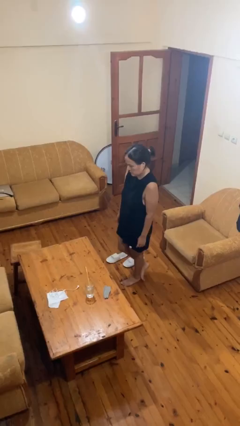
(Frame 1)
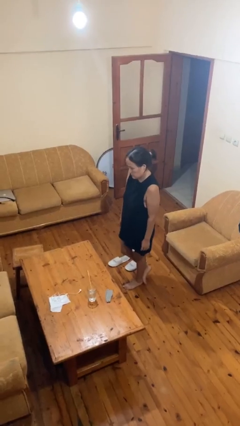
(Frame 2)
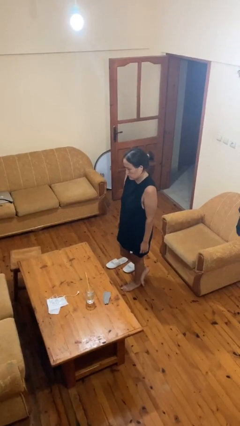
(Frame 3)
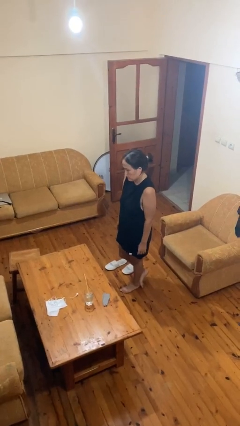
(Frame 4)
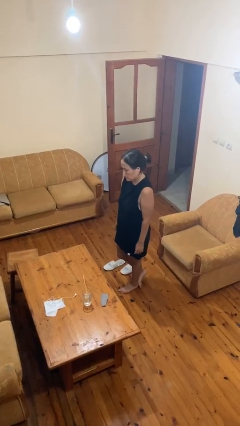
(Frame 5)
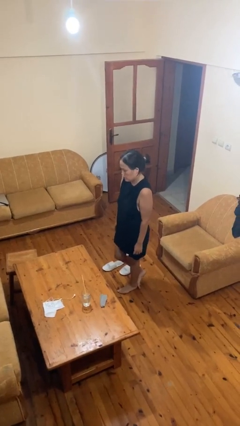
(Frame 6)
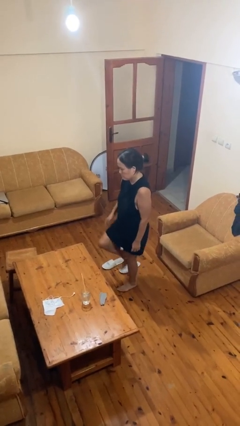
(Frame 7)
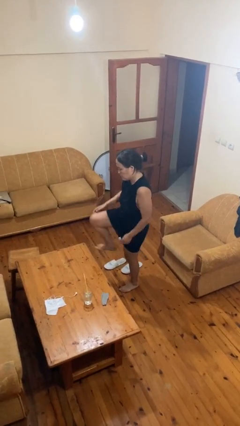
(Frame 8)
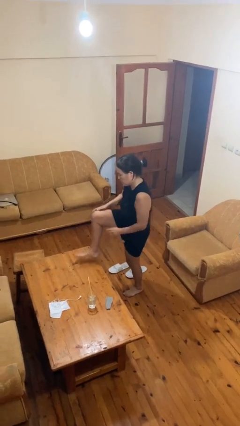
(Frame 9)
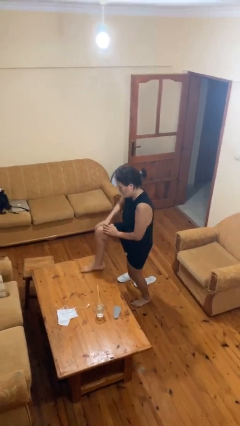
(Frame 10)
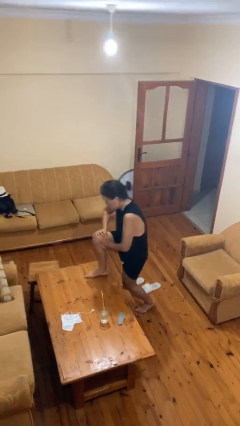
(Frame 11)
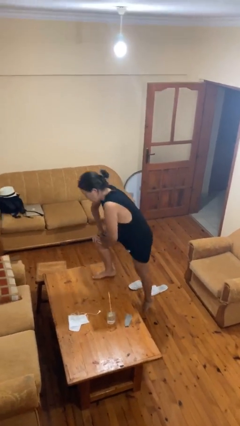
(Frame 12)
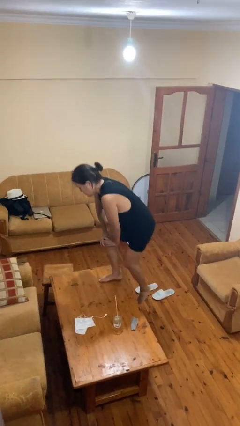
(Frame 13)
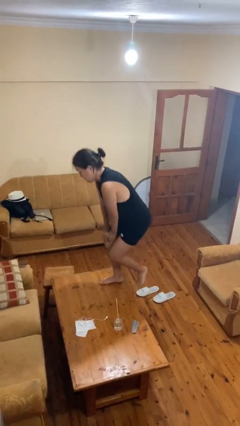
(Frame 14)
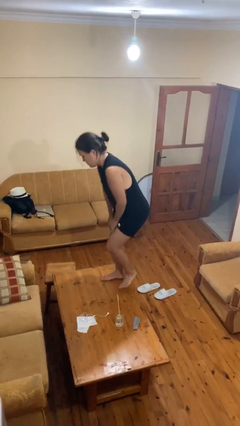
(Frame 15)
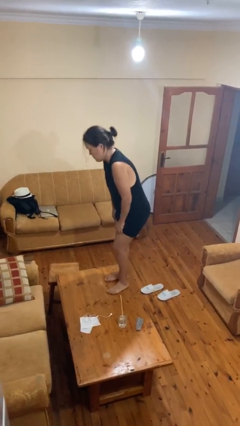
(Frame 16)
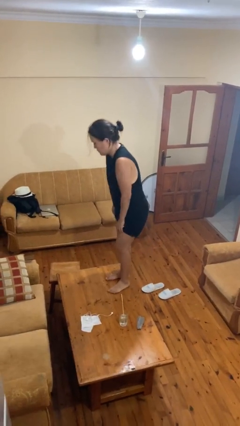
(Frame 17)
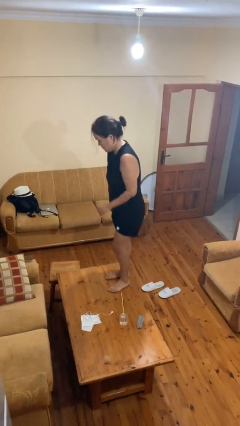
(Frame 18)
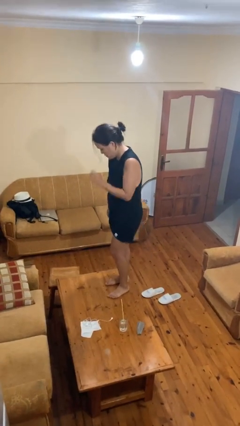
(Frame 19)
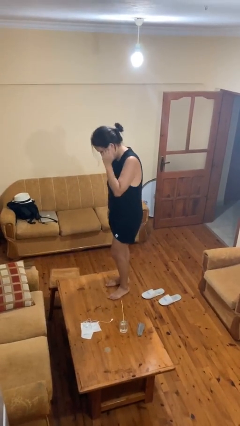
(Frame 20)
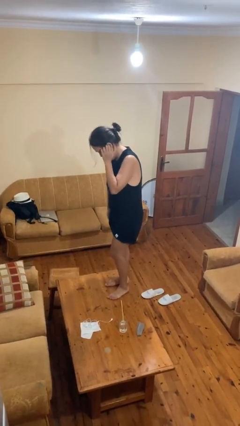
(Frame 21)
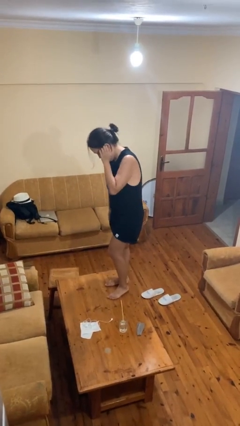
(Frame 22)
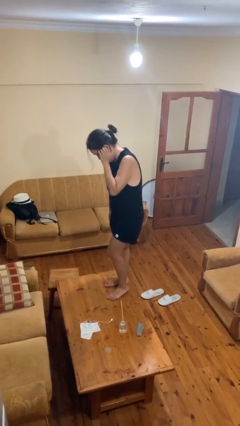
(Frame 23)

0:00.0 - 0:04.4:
person climbs on table

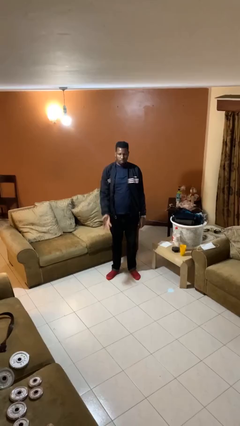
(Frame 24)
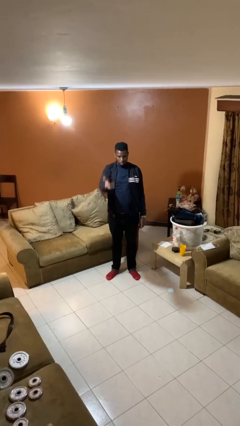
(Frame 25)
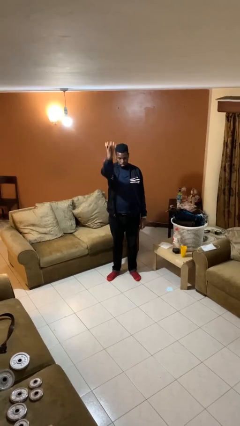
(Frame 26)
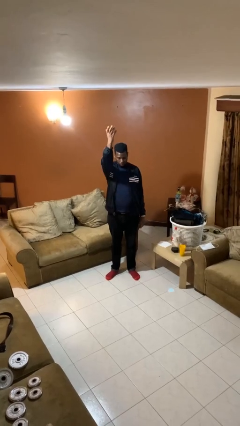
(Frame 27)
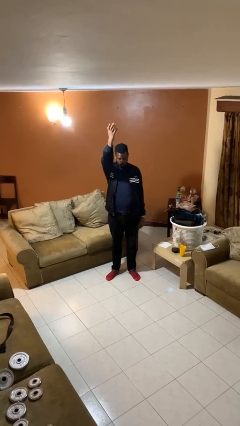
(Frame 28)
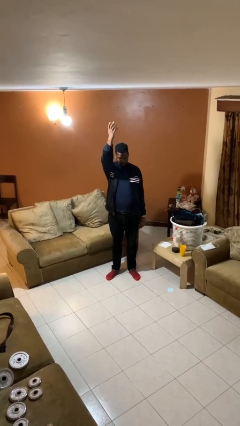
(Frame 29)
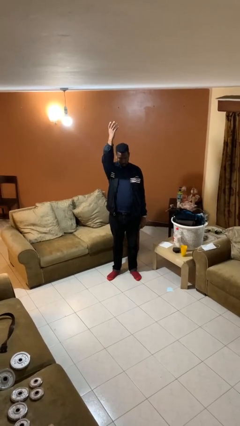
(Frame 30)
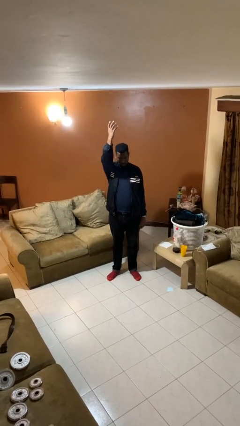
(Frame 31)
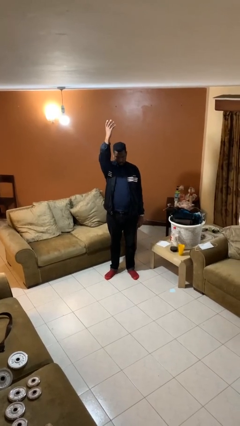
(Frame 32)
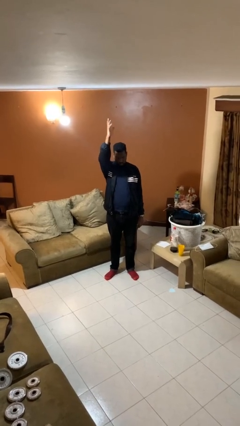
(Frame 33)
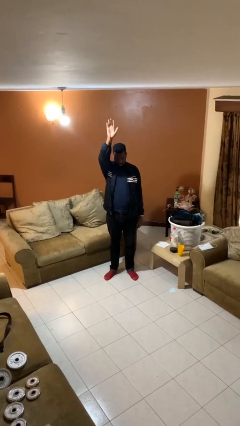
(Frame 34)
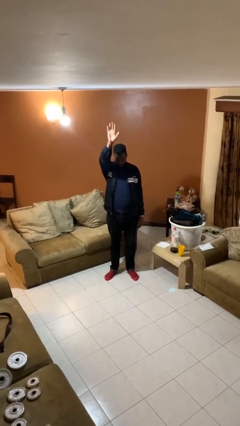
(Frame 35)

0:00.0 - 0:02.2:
person gestures swipe up

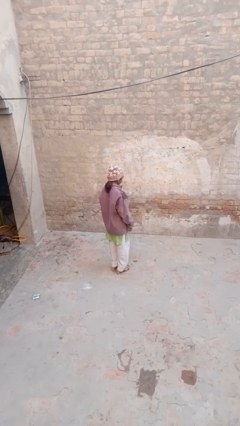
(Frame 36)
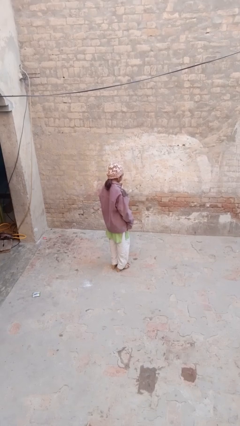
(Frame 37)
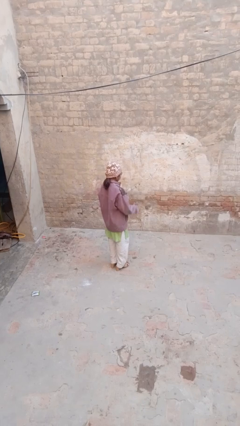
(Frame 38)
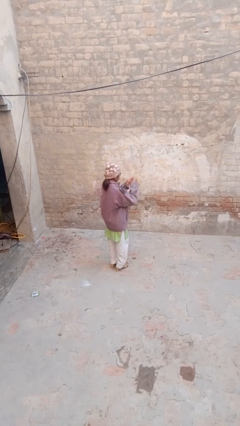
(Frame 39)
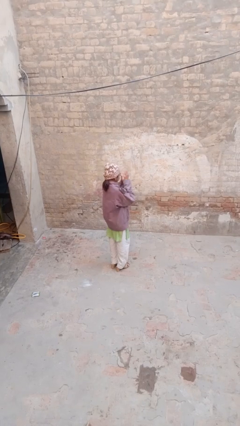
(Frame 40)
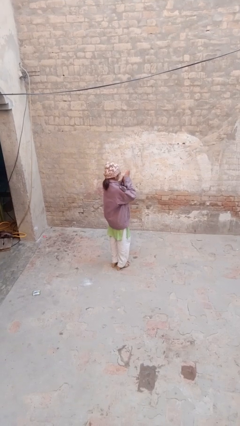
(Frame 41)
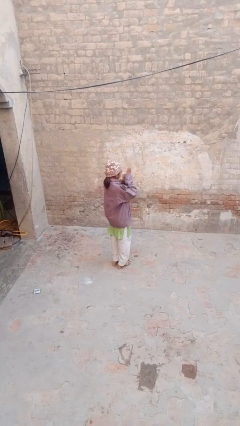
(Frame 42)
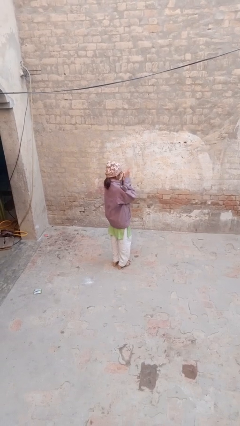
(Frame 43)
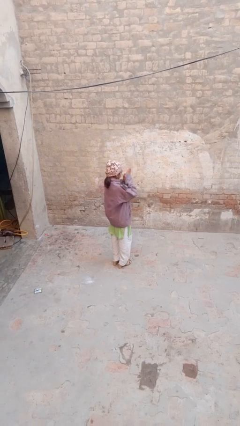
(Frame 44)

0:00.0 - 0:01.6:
person blows into hands

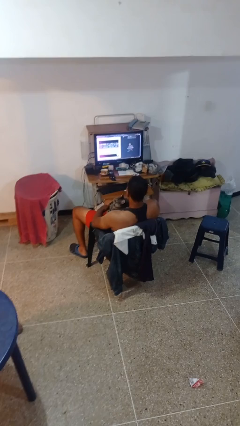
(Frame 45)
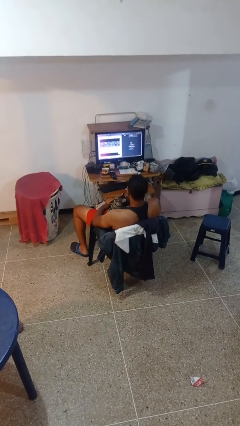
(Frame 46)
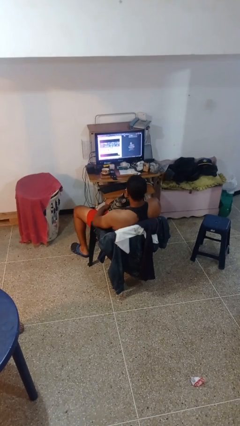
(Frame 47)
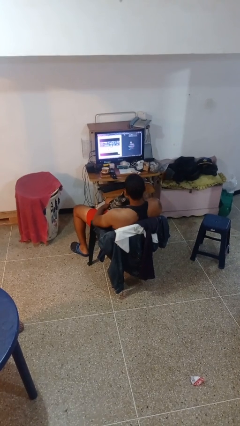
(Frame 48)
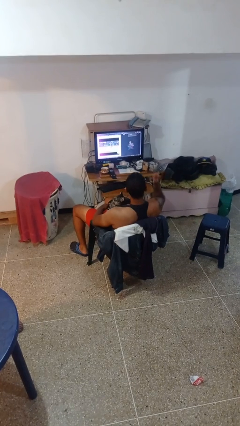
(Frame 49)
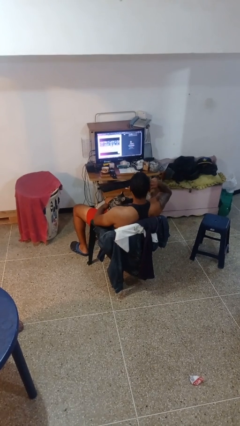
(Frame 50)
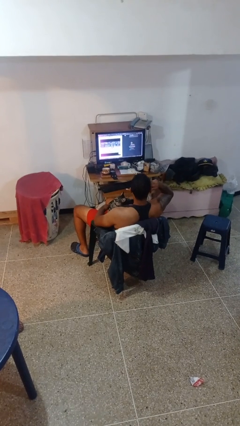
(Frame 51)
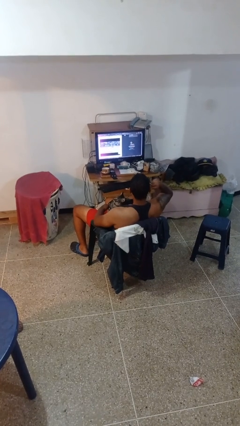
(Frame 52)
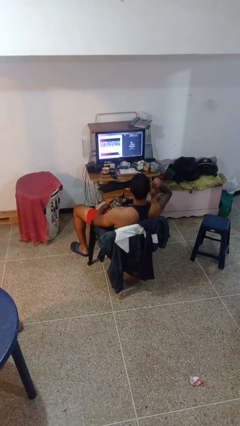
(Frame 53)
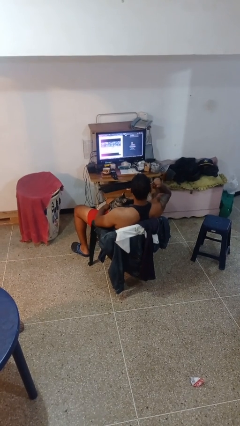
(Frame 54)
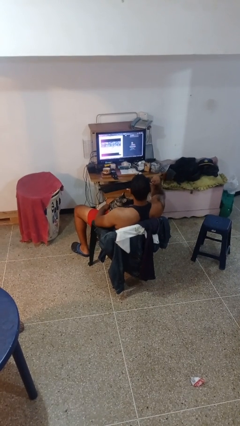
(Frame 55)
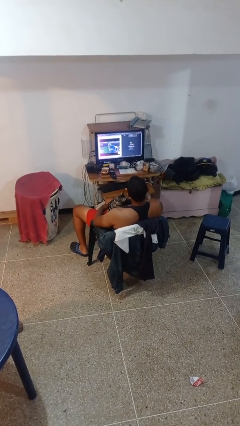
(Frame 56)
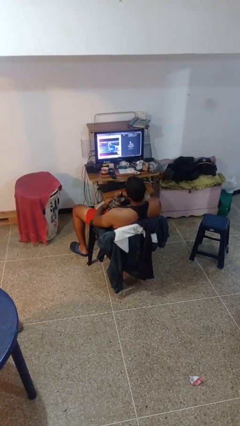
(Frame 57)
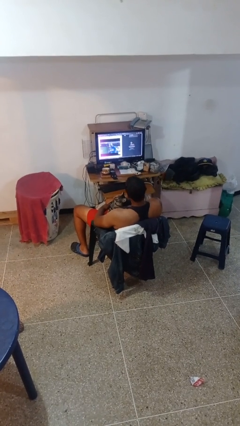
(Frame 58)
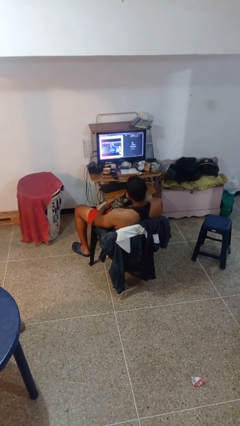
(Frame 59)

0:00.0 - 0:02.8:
person gestures listen closely

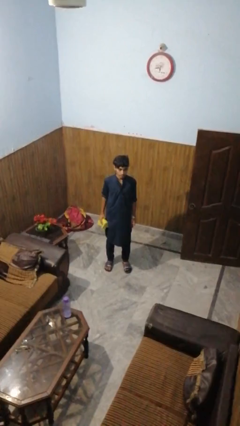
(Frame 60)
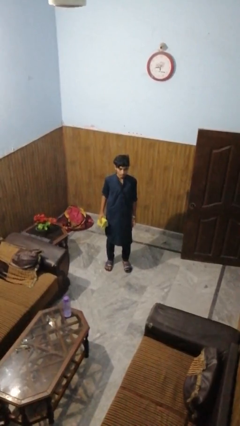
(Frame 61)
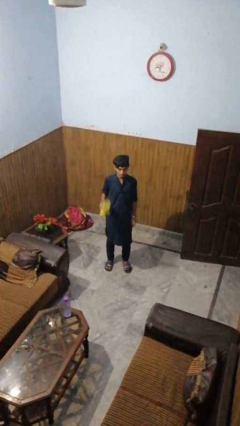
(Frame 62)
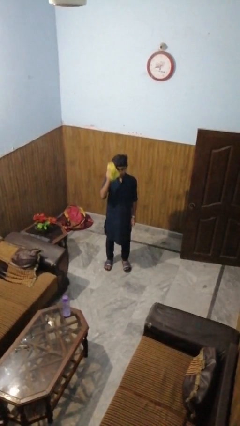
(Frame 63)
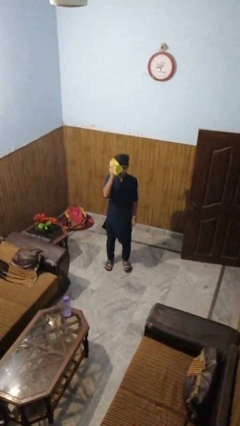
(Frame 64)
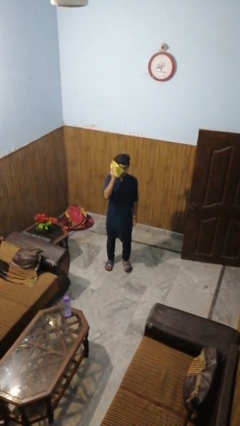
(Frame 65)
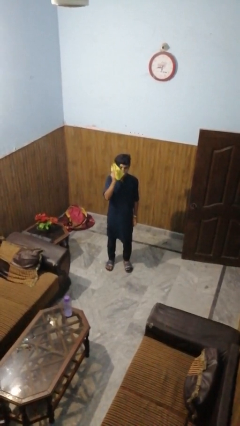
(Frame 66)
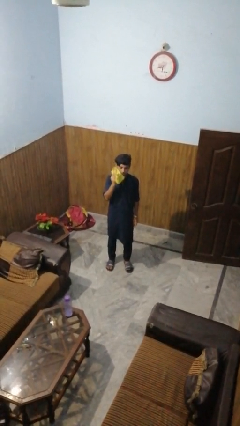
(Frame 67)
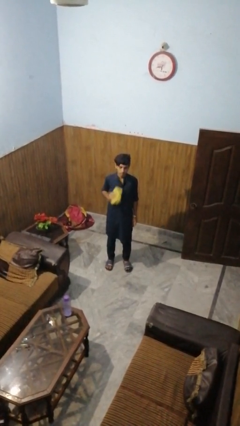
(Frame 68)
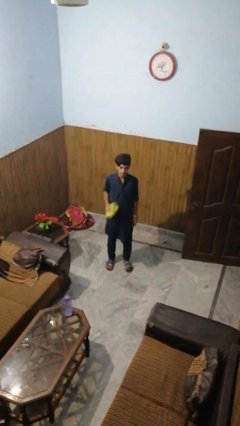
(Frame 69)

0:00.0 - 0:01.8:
person wipes mouth with napkin

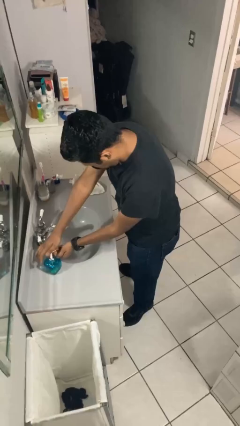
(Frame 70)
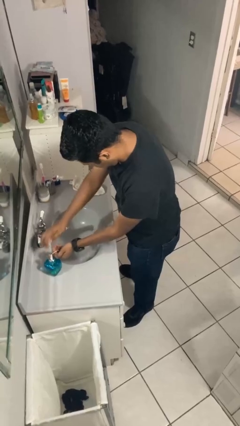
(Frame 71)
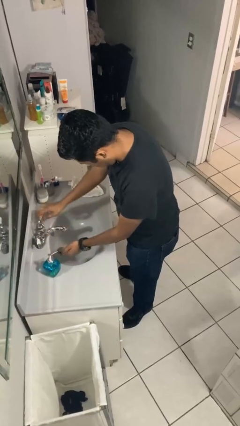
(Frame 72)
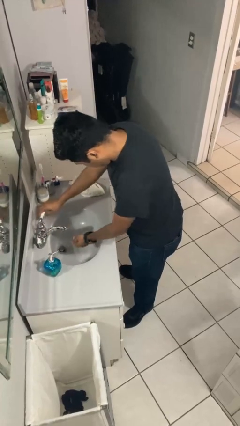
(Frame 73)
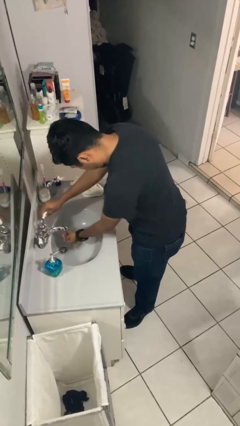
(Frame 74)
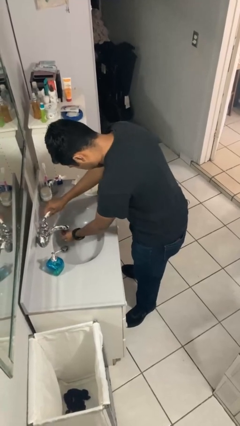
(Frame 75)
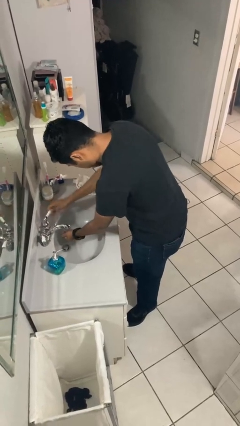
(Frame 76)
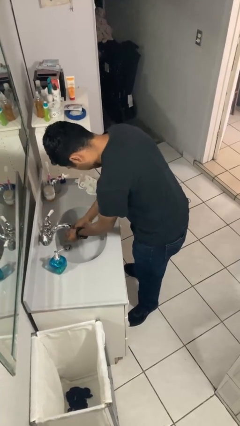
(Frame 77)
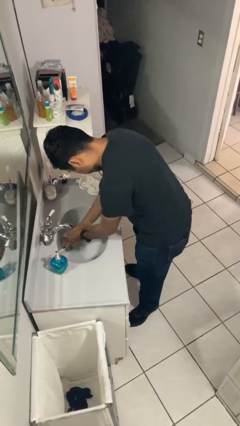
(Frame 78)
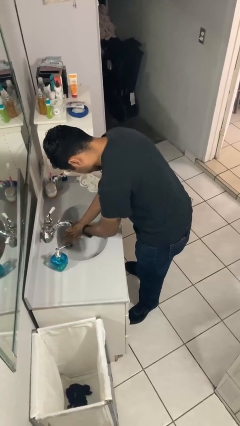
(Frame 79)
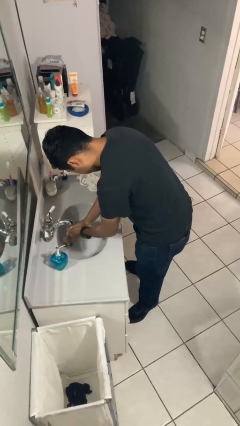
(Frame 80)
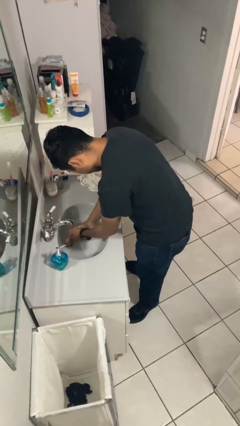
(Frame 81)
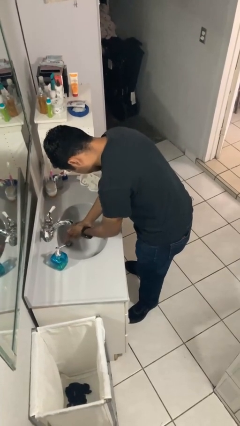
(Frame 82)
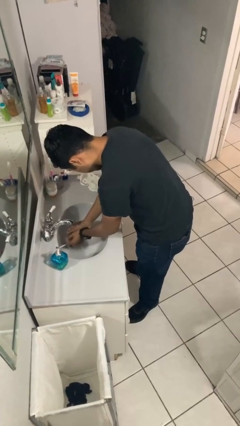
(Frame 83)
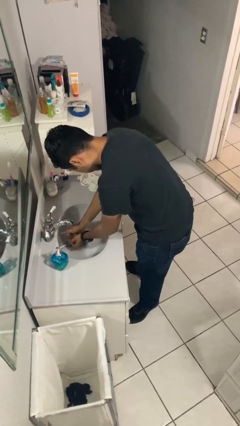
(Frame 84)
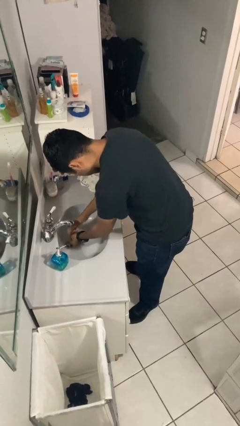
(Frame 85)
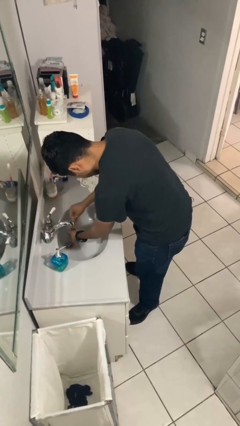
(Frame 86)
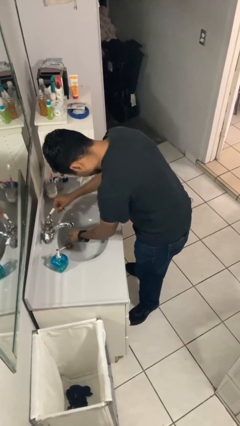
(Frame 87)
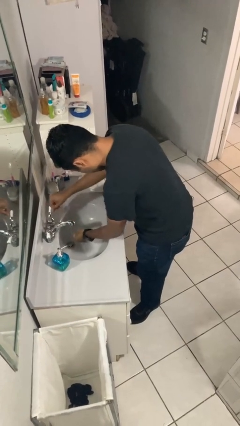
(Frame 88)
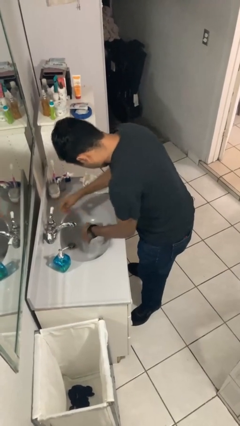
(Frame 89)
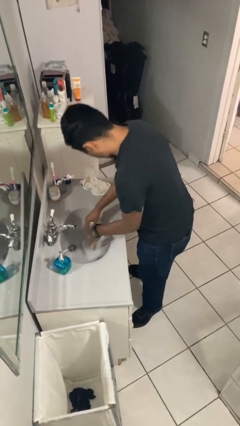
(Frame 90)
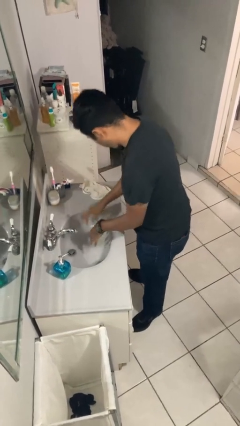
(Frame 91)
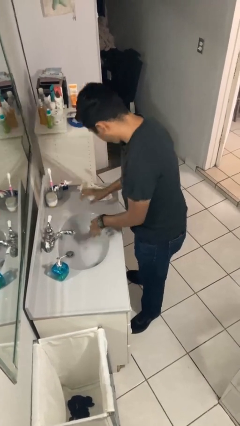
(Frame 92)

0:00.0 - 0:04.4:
person washes hands

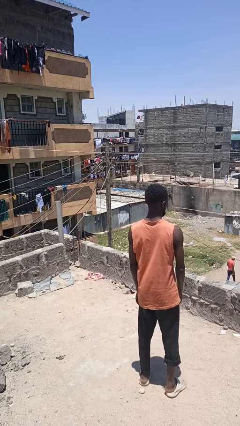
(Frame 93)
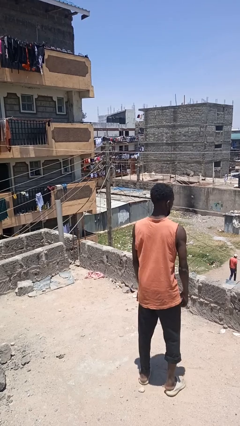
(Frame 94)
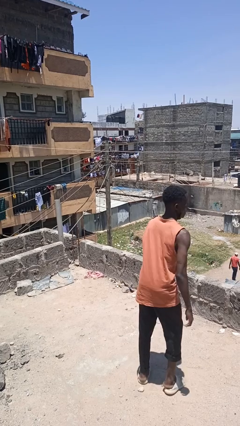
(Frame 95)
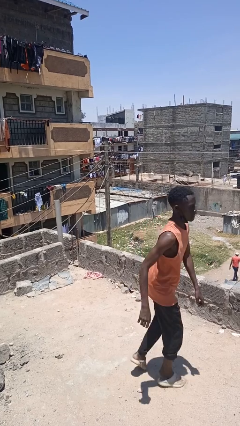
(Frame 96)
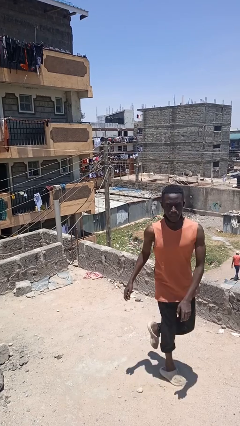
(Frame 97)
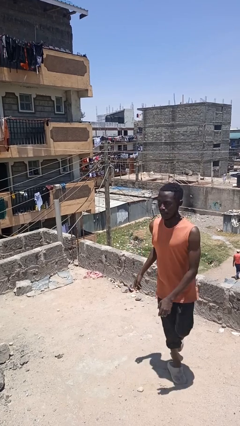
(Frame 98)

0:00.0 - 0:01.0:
person twirls
